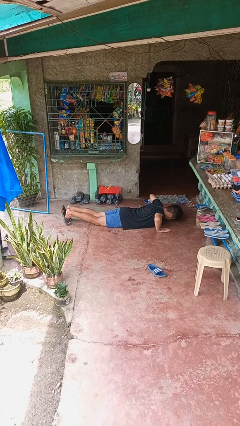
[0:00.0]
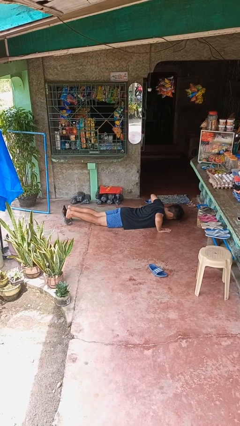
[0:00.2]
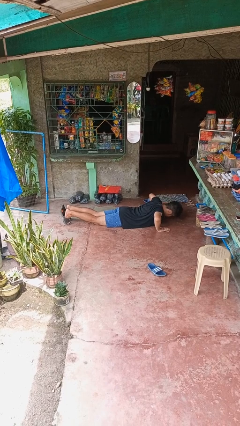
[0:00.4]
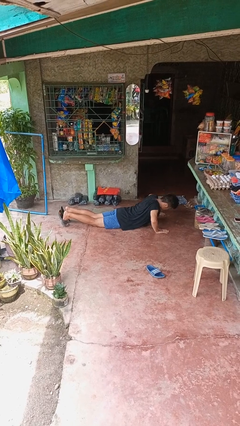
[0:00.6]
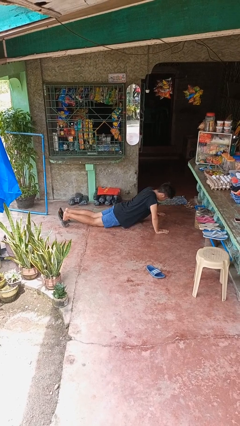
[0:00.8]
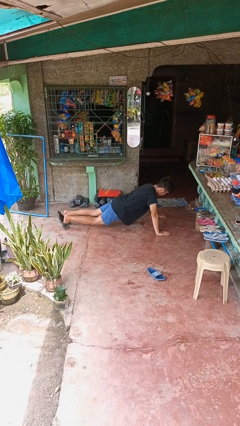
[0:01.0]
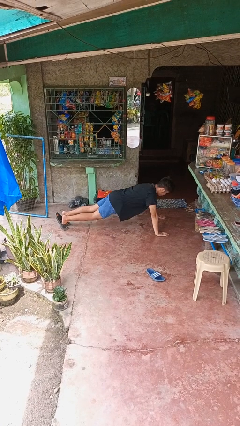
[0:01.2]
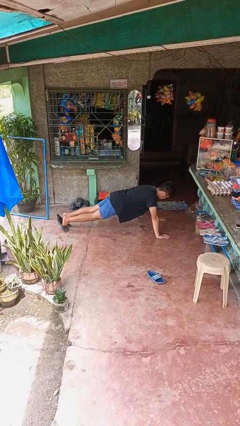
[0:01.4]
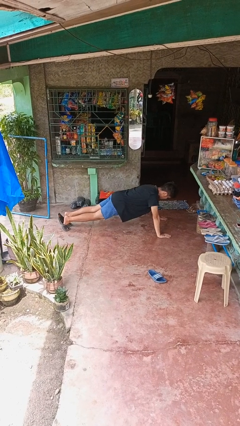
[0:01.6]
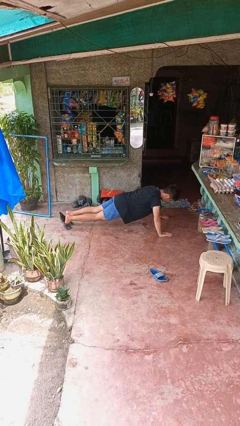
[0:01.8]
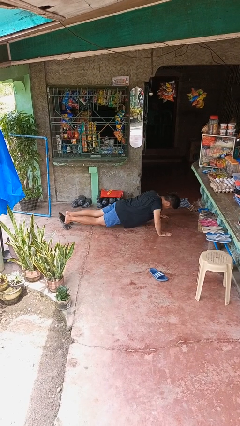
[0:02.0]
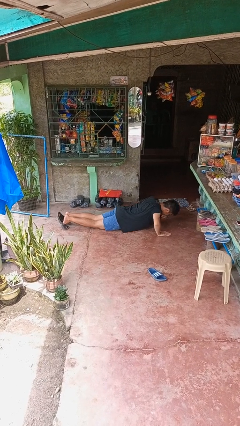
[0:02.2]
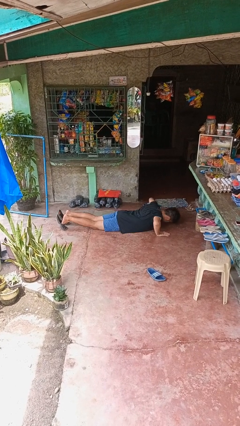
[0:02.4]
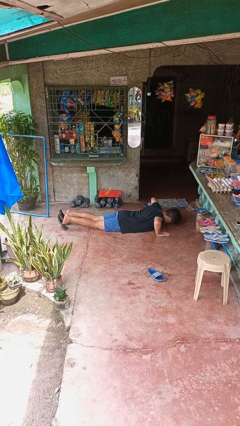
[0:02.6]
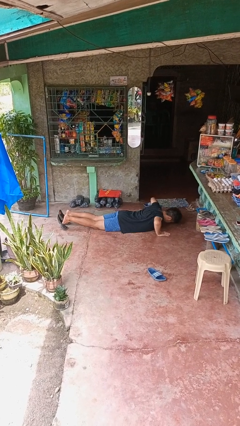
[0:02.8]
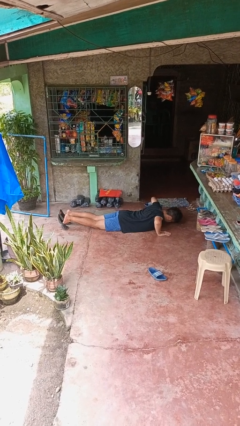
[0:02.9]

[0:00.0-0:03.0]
person exercises with pushup

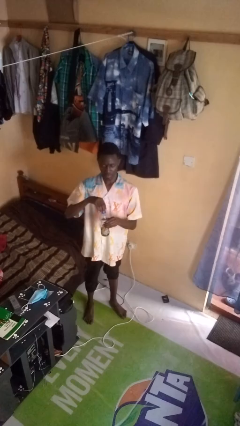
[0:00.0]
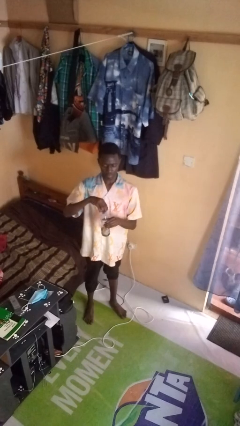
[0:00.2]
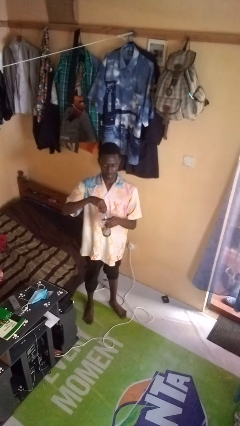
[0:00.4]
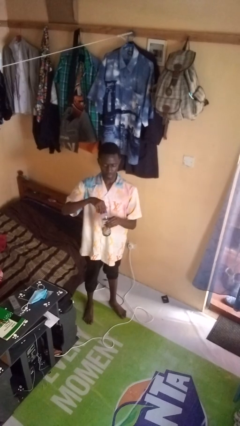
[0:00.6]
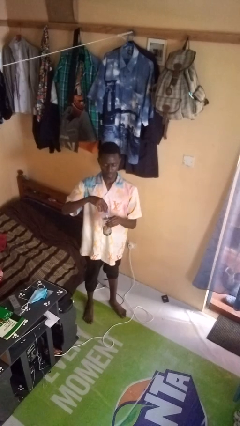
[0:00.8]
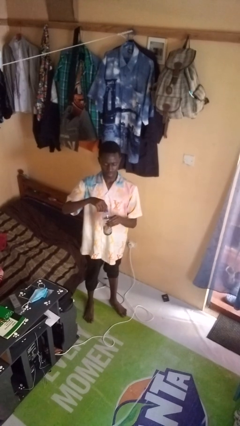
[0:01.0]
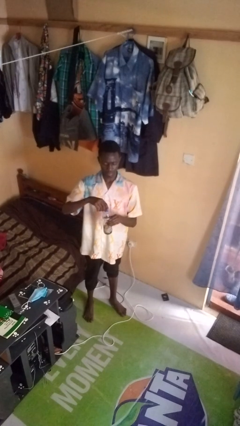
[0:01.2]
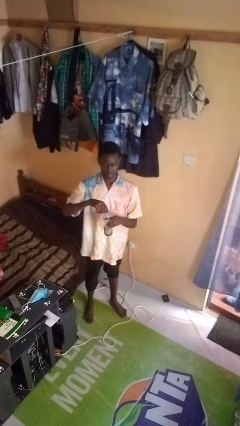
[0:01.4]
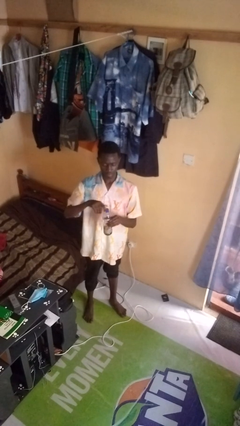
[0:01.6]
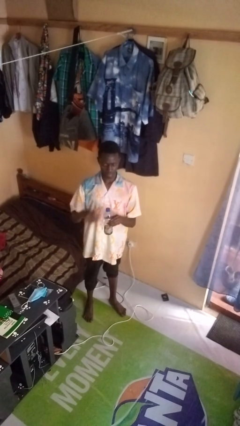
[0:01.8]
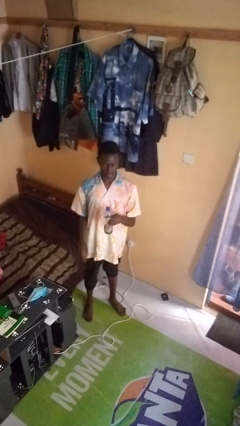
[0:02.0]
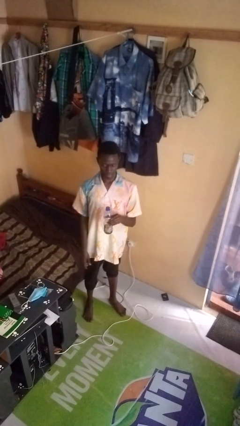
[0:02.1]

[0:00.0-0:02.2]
person screws lid to bottle

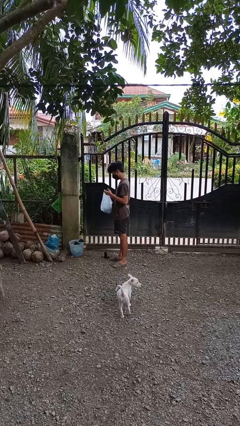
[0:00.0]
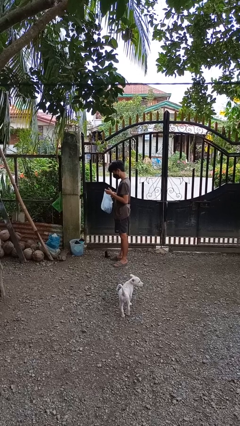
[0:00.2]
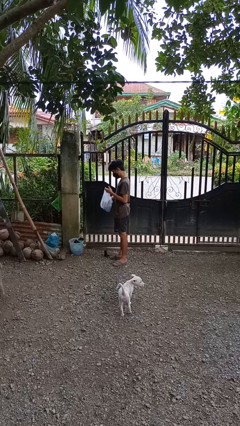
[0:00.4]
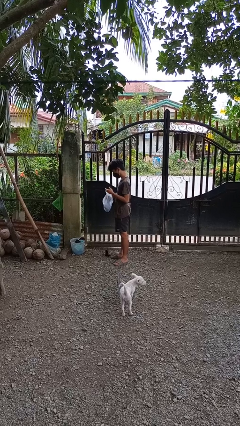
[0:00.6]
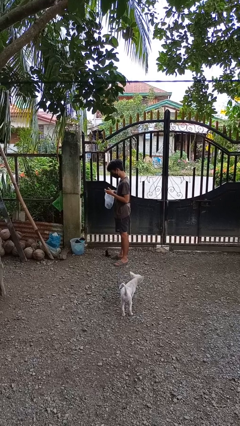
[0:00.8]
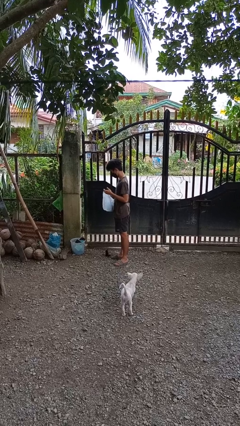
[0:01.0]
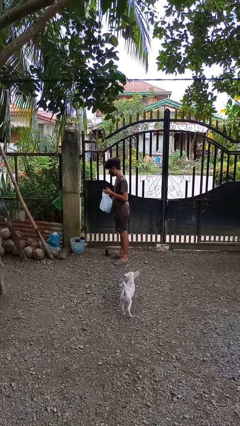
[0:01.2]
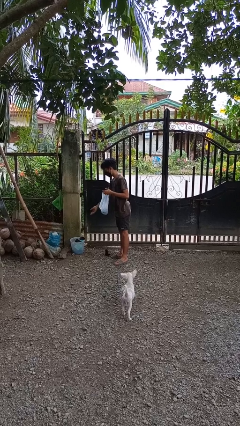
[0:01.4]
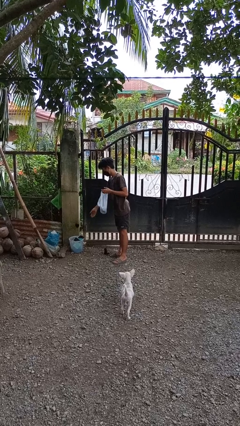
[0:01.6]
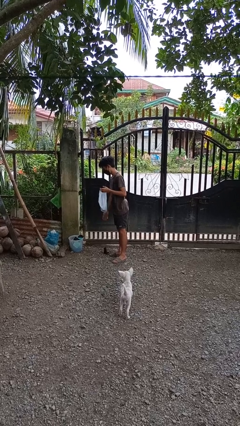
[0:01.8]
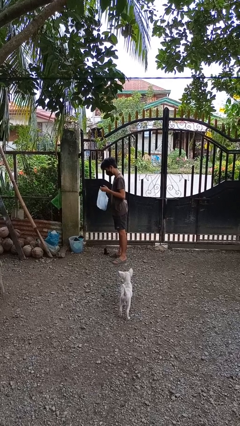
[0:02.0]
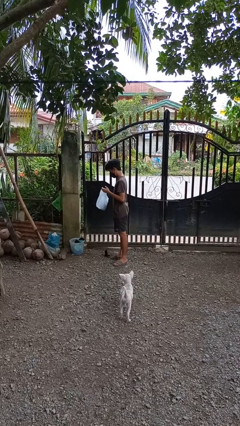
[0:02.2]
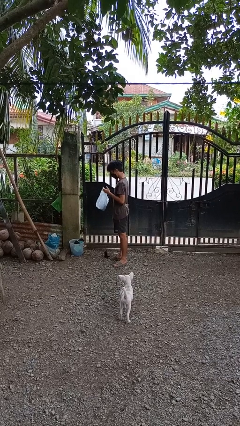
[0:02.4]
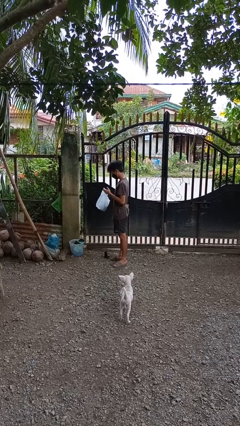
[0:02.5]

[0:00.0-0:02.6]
person discards trash

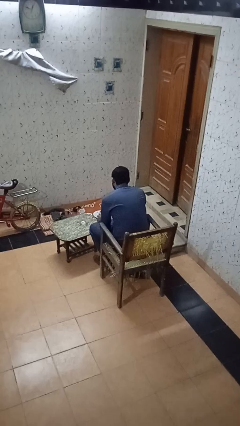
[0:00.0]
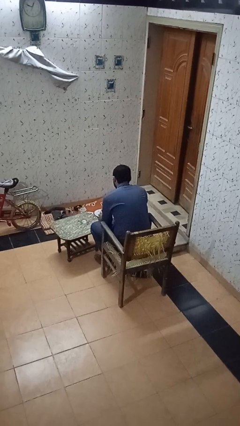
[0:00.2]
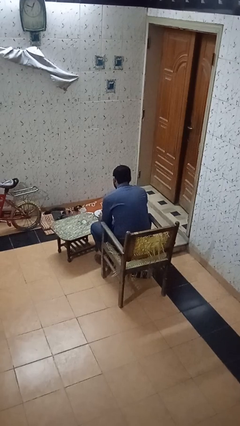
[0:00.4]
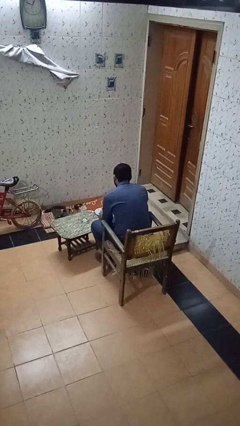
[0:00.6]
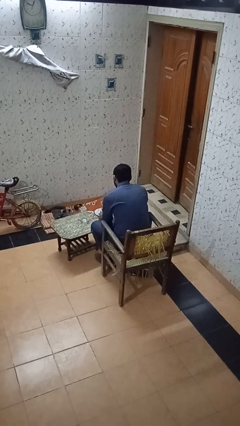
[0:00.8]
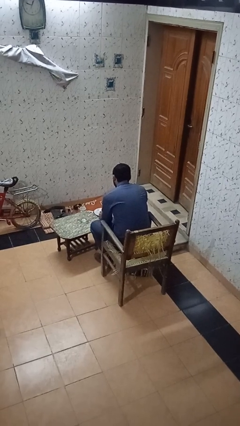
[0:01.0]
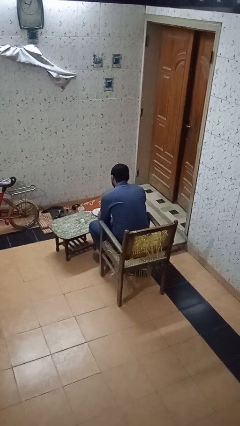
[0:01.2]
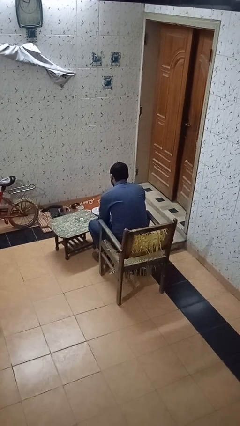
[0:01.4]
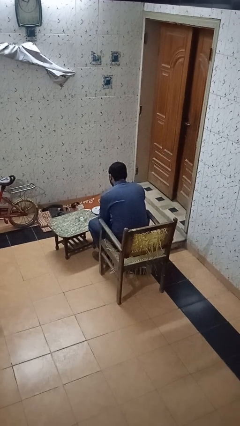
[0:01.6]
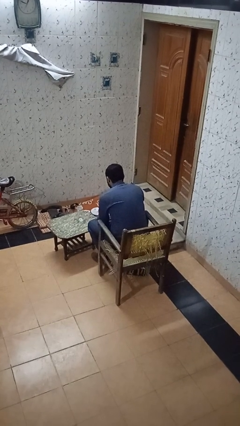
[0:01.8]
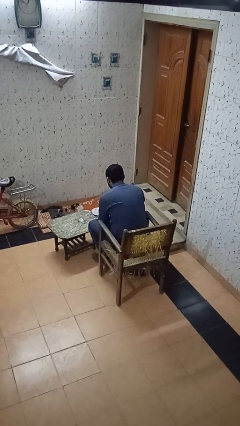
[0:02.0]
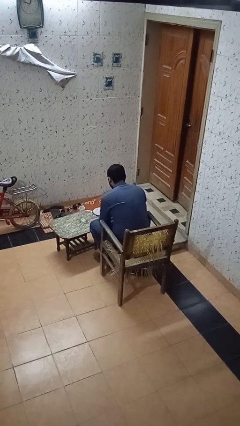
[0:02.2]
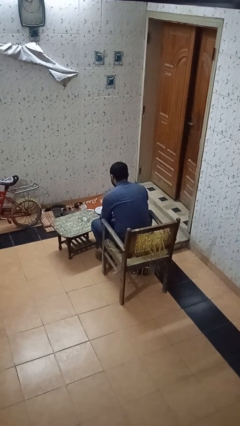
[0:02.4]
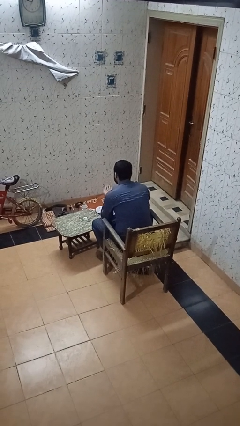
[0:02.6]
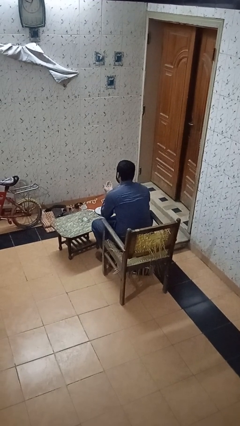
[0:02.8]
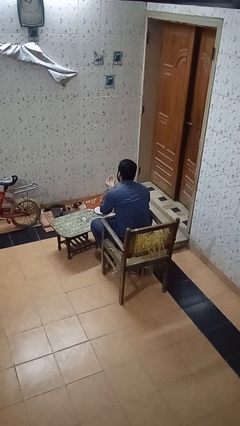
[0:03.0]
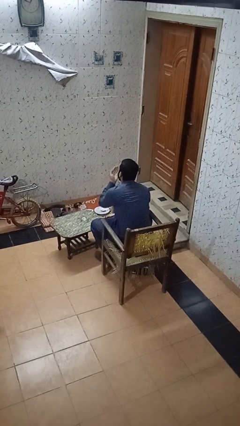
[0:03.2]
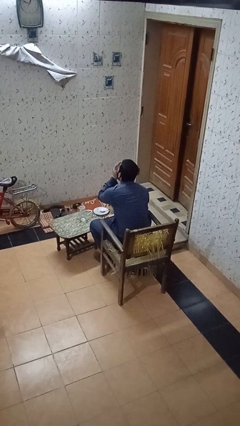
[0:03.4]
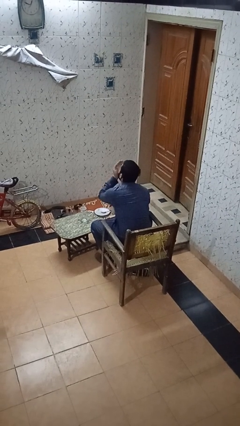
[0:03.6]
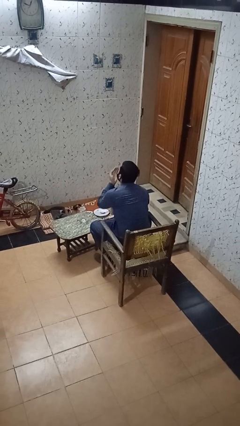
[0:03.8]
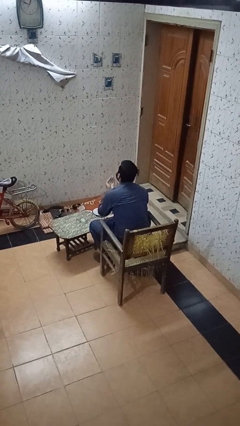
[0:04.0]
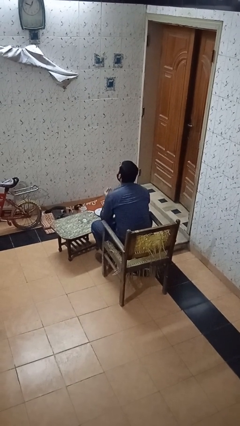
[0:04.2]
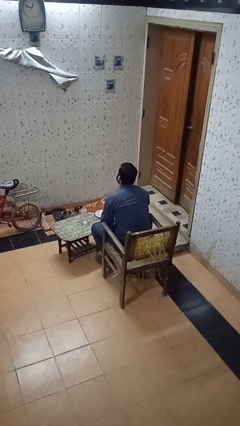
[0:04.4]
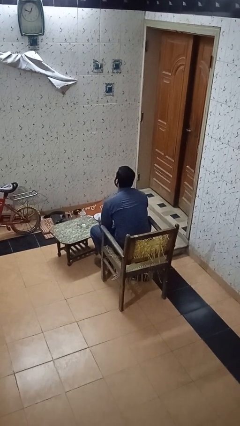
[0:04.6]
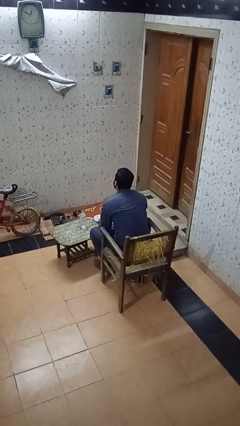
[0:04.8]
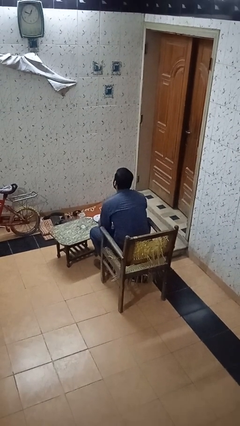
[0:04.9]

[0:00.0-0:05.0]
person takes medicine pills

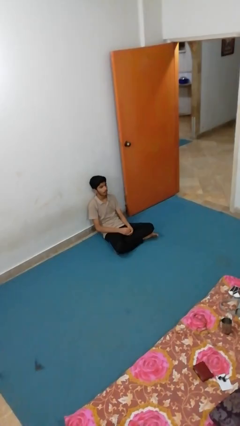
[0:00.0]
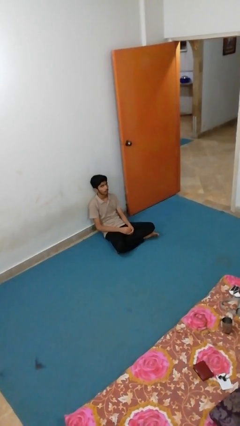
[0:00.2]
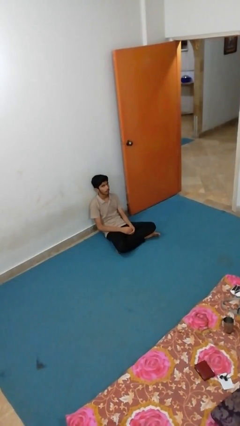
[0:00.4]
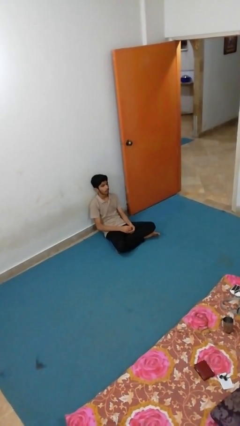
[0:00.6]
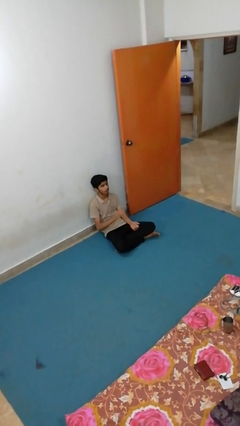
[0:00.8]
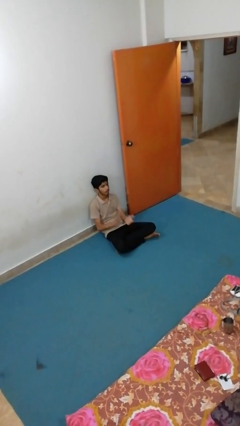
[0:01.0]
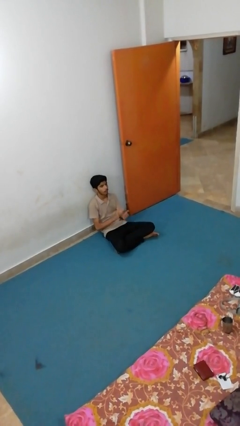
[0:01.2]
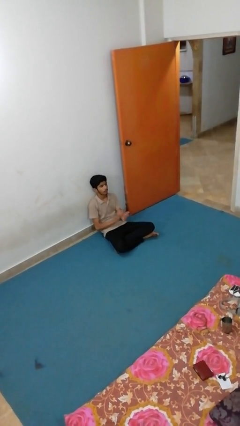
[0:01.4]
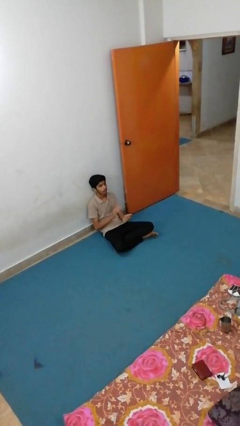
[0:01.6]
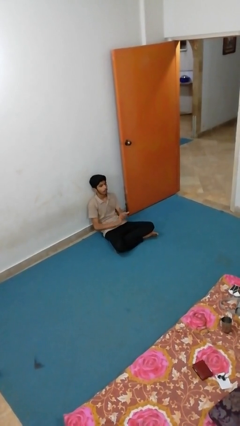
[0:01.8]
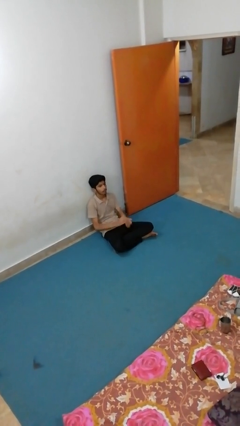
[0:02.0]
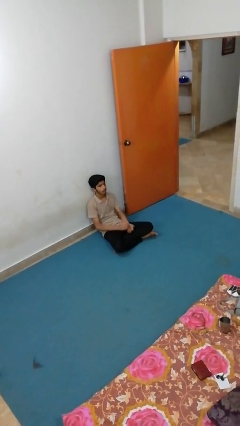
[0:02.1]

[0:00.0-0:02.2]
person claps hands

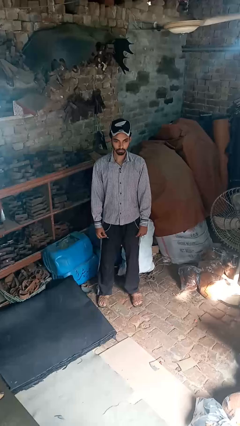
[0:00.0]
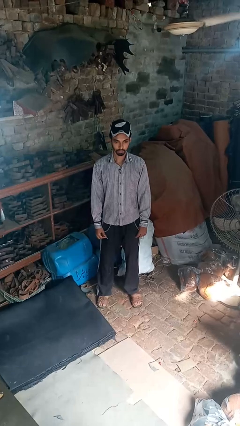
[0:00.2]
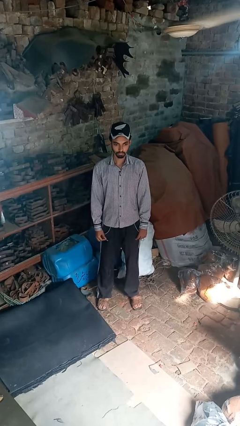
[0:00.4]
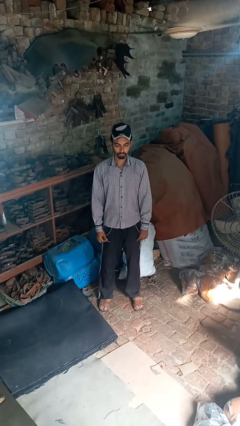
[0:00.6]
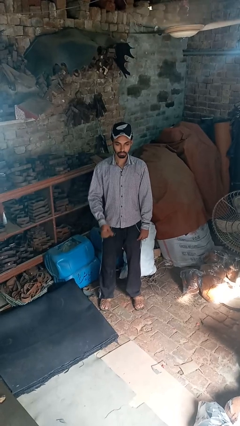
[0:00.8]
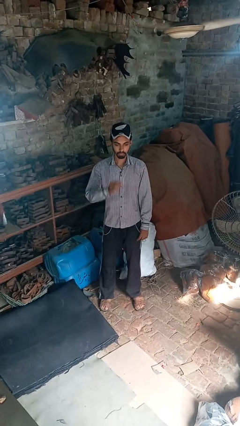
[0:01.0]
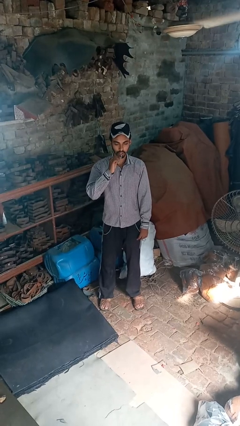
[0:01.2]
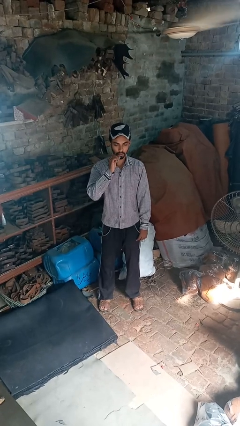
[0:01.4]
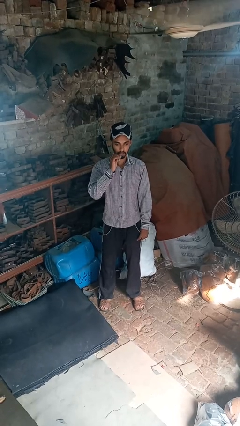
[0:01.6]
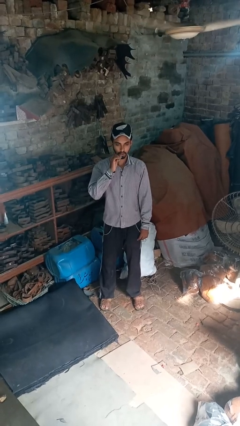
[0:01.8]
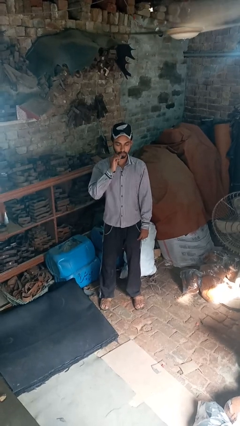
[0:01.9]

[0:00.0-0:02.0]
person flosses
